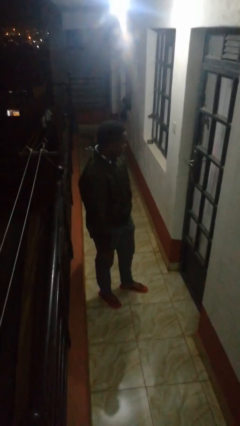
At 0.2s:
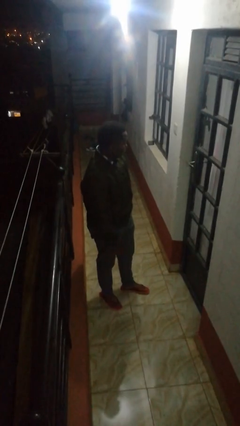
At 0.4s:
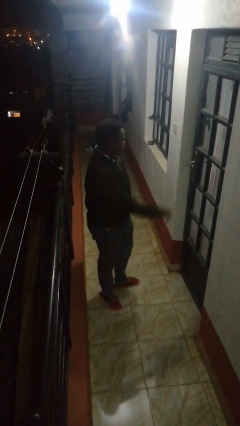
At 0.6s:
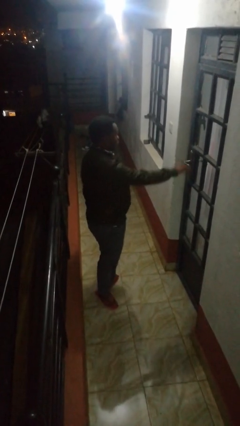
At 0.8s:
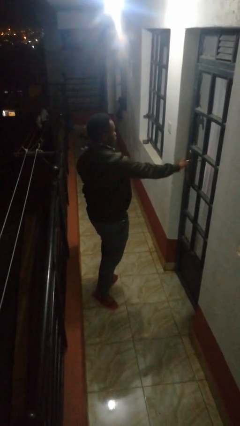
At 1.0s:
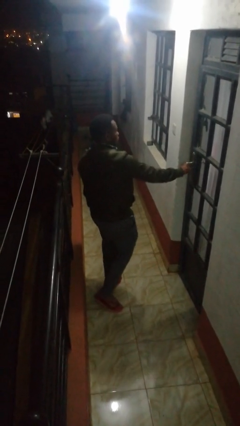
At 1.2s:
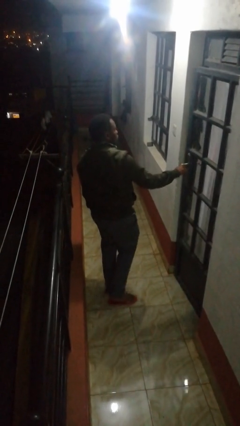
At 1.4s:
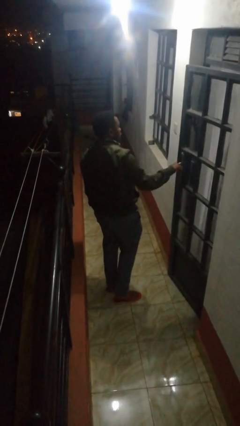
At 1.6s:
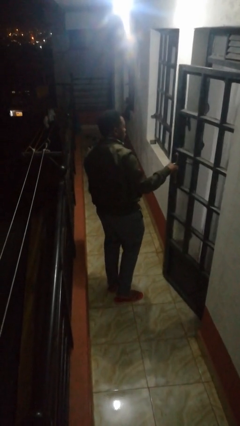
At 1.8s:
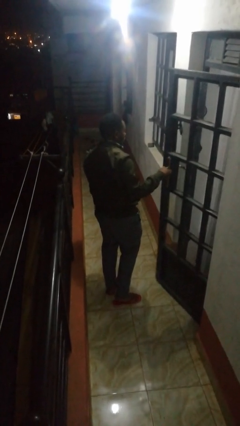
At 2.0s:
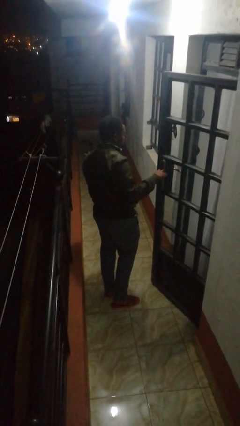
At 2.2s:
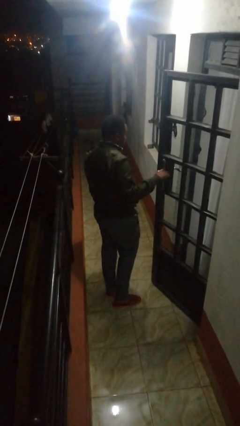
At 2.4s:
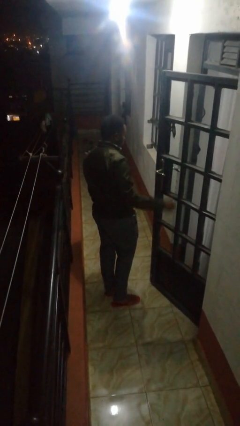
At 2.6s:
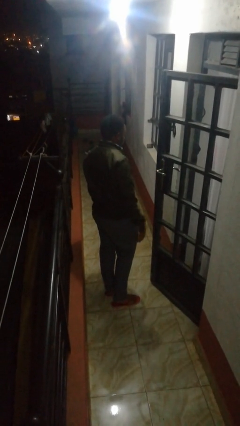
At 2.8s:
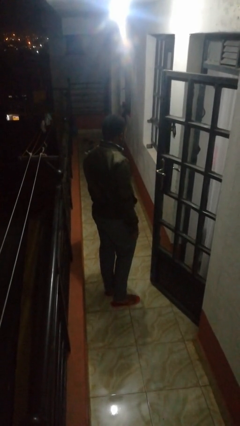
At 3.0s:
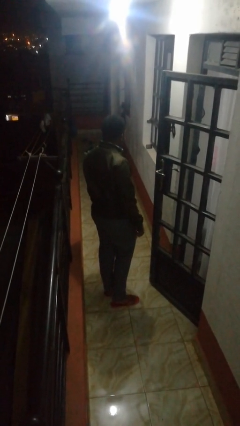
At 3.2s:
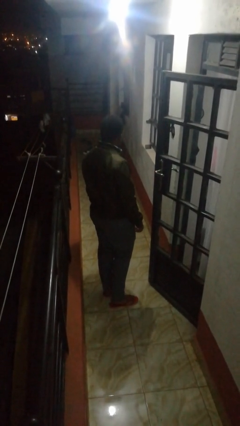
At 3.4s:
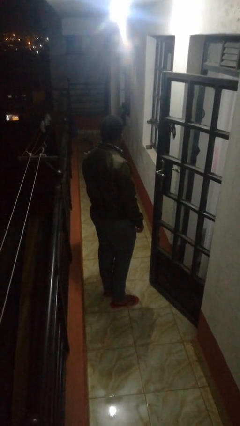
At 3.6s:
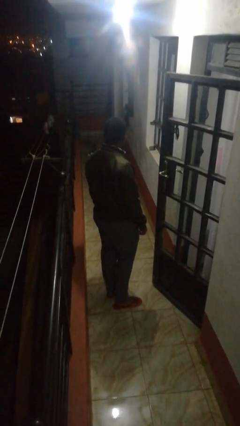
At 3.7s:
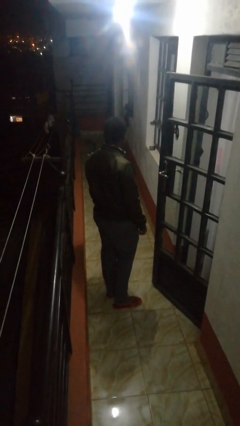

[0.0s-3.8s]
person opens facility door

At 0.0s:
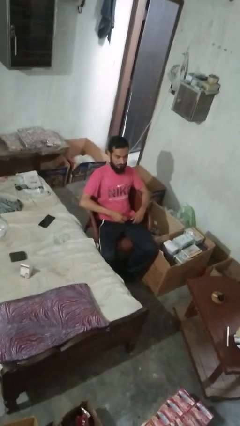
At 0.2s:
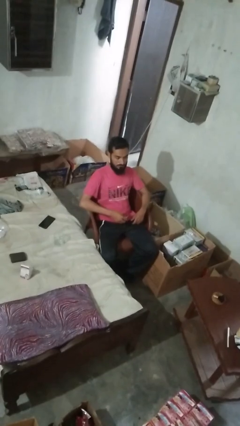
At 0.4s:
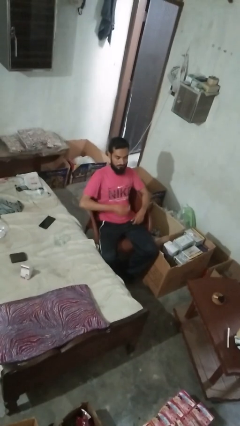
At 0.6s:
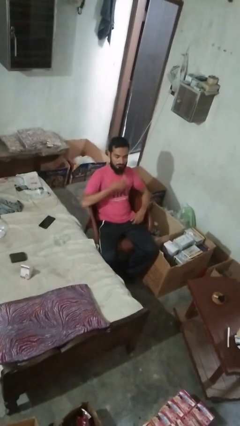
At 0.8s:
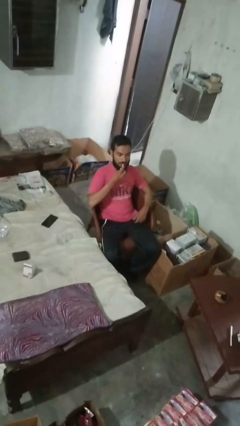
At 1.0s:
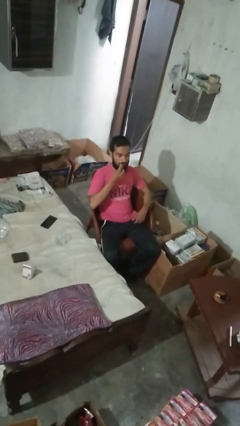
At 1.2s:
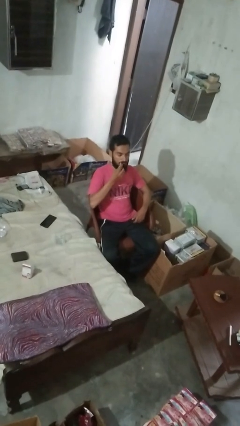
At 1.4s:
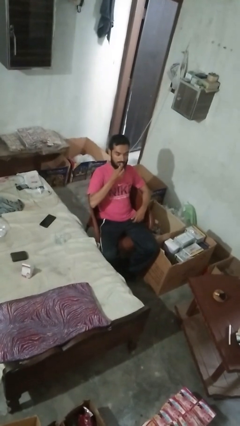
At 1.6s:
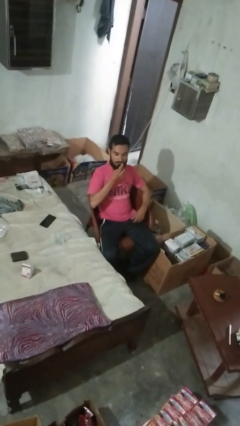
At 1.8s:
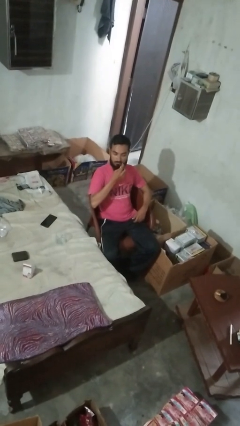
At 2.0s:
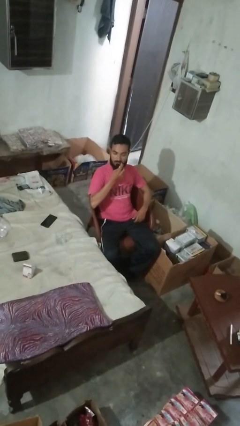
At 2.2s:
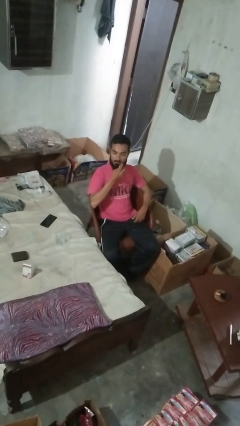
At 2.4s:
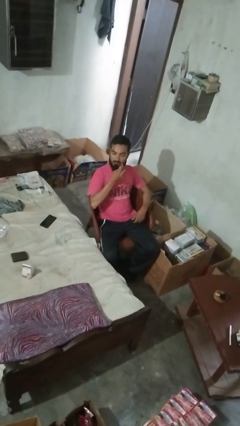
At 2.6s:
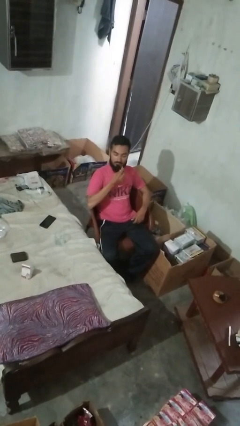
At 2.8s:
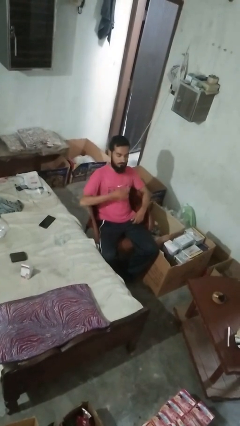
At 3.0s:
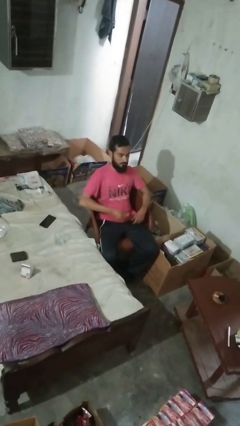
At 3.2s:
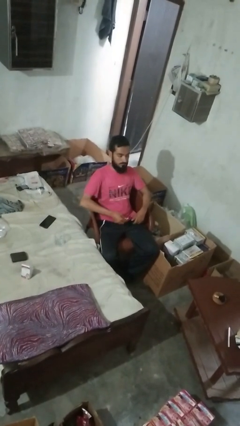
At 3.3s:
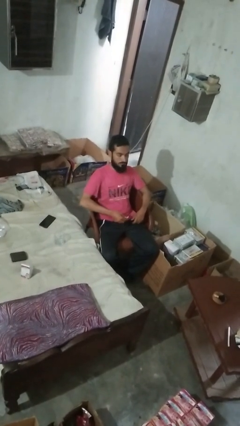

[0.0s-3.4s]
person applies lip makeup

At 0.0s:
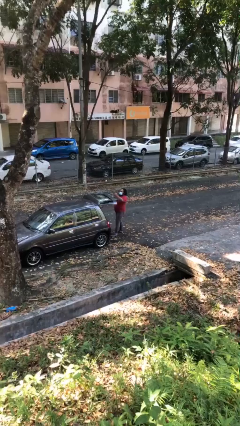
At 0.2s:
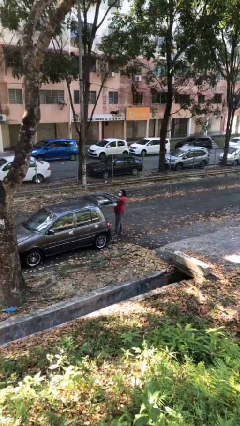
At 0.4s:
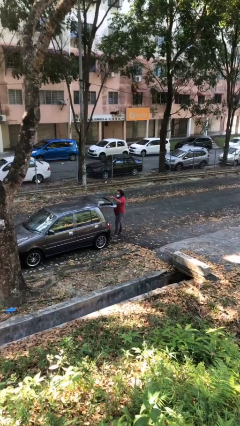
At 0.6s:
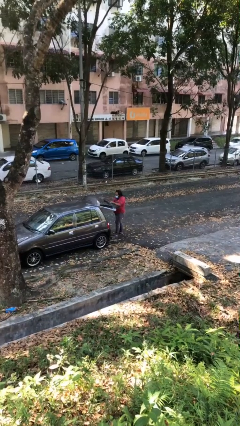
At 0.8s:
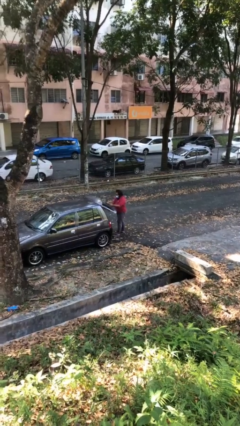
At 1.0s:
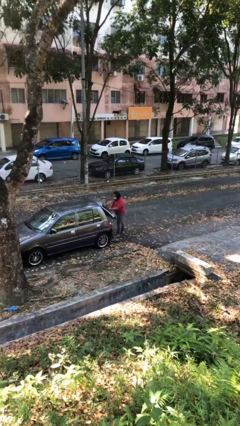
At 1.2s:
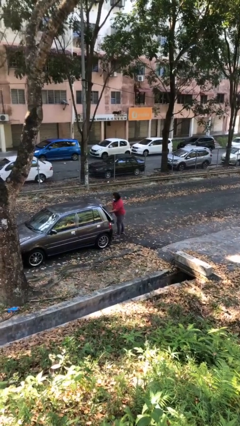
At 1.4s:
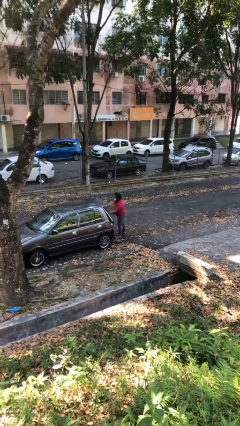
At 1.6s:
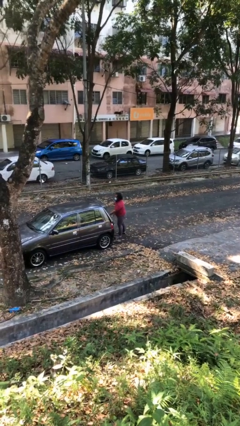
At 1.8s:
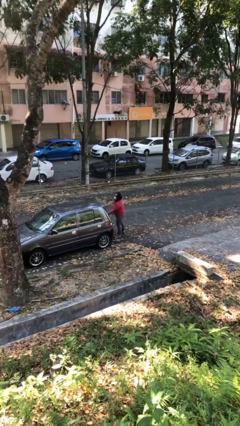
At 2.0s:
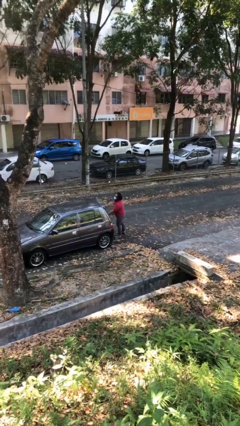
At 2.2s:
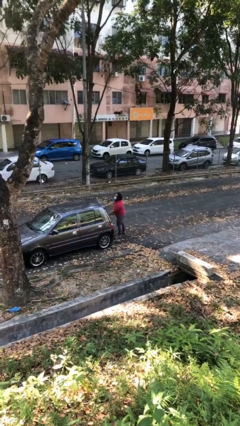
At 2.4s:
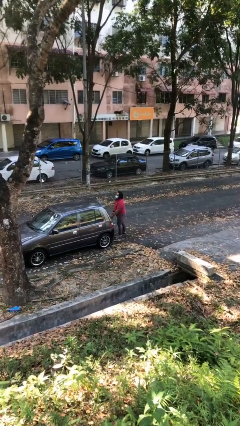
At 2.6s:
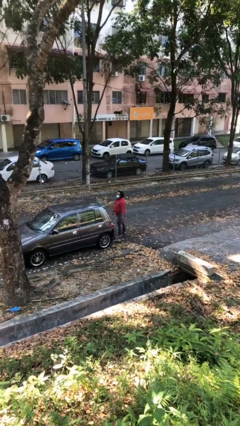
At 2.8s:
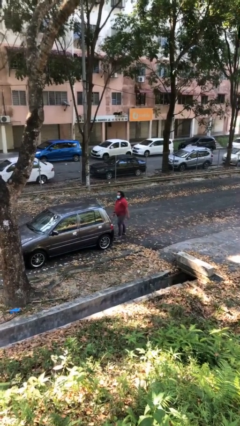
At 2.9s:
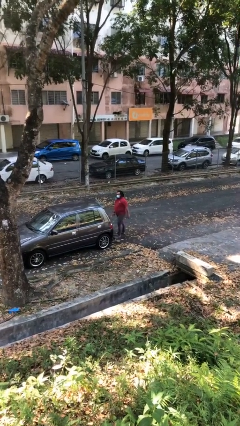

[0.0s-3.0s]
person closes car trunk

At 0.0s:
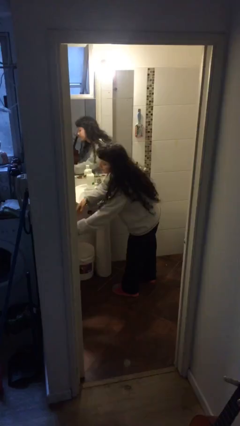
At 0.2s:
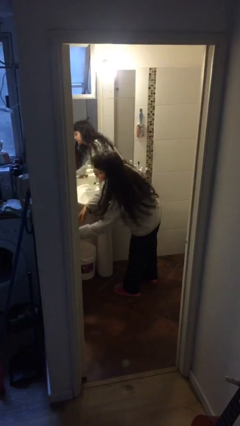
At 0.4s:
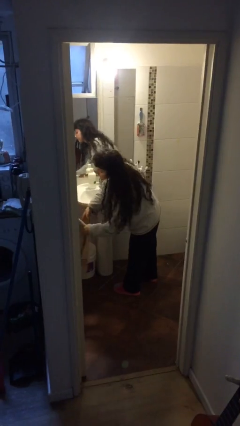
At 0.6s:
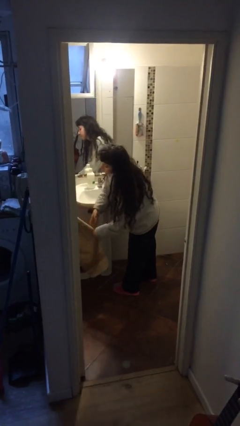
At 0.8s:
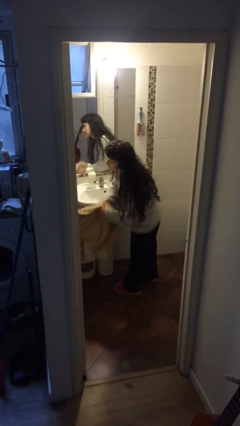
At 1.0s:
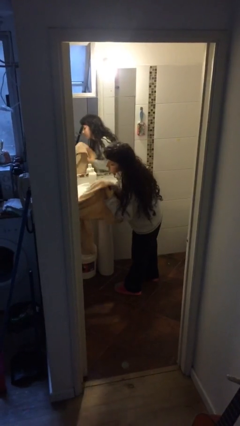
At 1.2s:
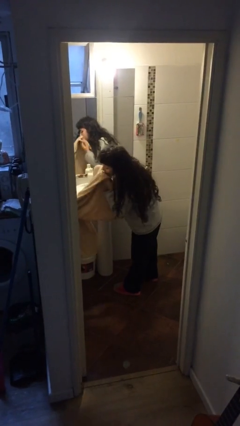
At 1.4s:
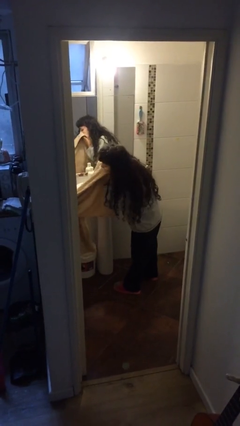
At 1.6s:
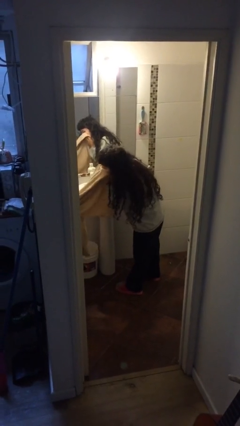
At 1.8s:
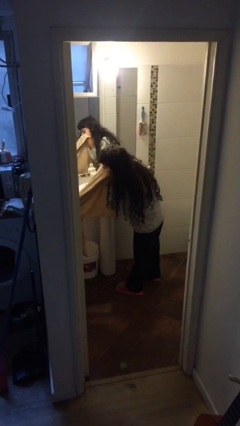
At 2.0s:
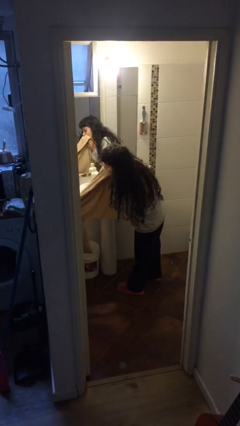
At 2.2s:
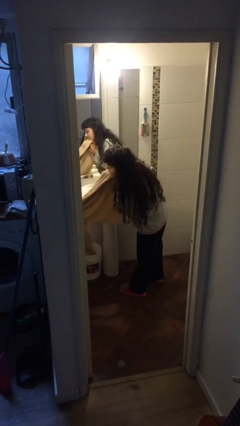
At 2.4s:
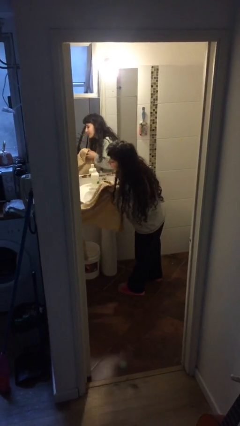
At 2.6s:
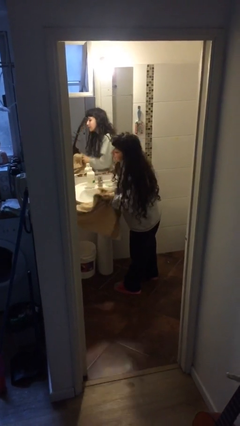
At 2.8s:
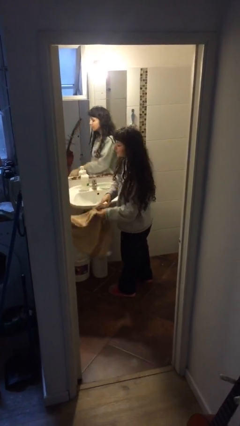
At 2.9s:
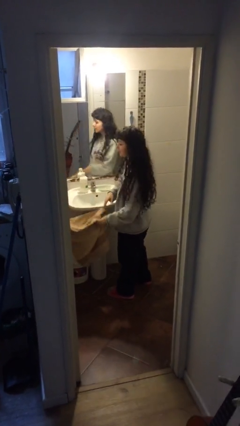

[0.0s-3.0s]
person dries face with towel

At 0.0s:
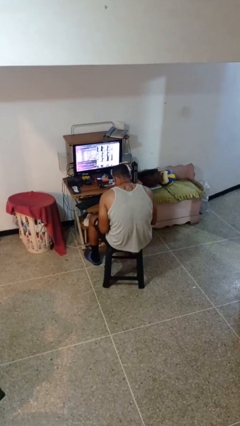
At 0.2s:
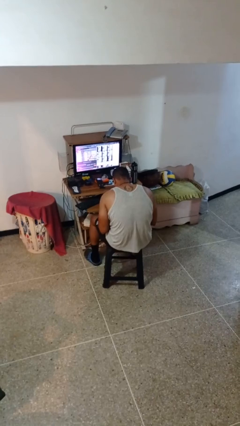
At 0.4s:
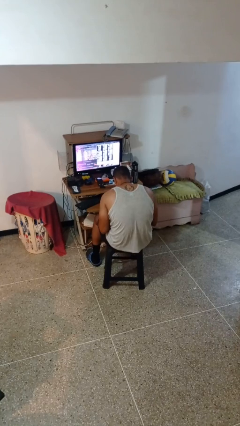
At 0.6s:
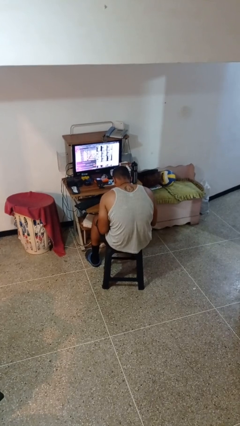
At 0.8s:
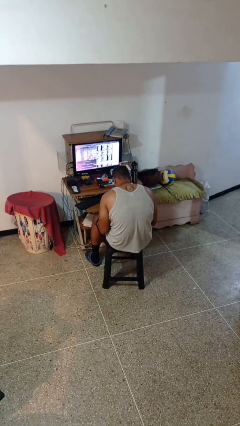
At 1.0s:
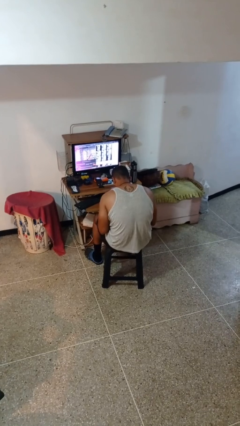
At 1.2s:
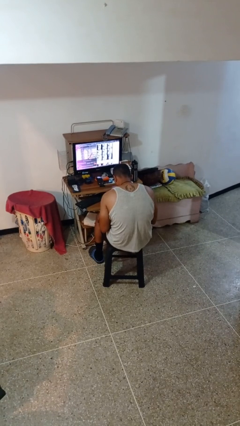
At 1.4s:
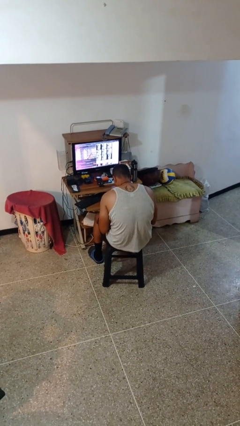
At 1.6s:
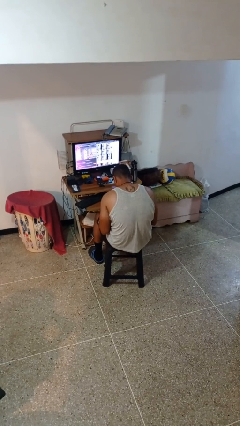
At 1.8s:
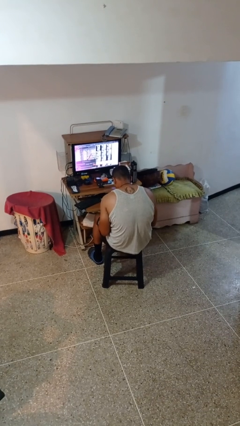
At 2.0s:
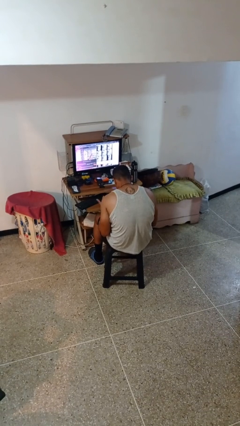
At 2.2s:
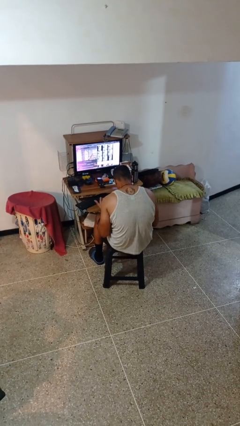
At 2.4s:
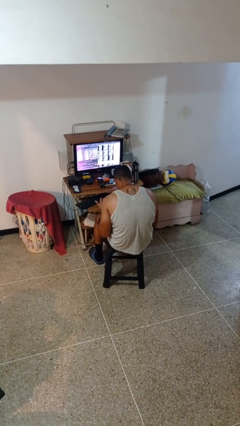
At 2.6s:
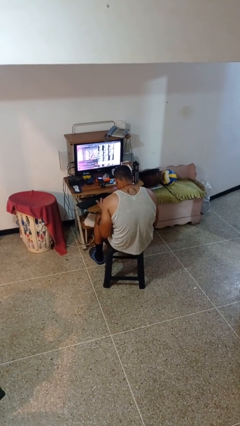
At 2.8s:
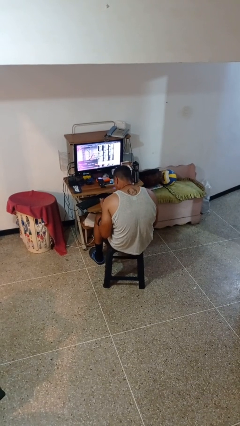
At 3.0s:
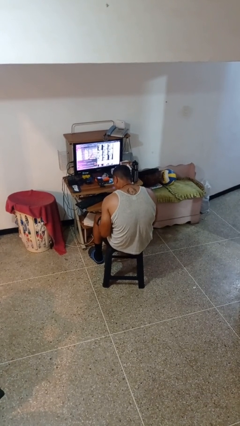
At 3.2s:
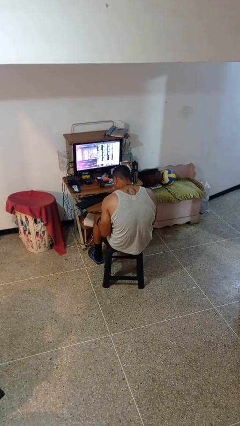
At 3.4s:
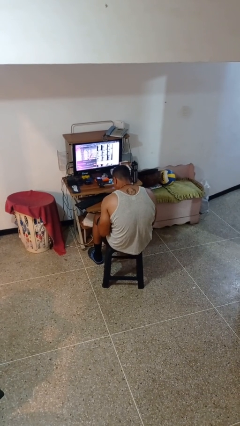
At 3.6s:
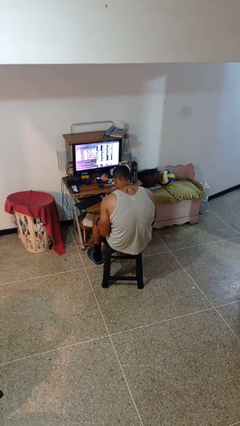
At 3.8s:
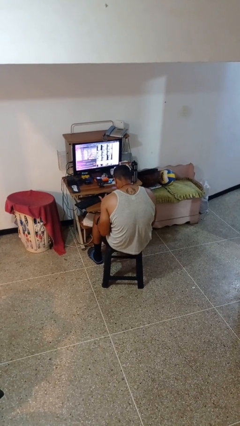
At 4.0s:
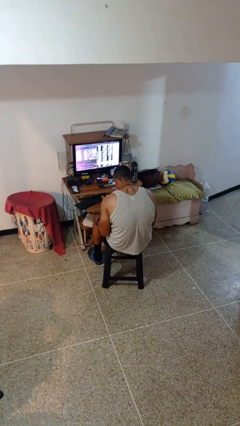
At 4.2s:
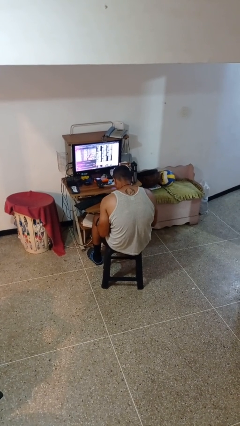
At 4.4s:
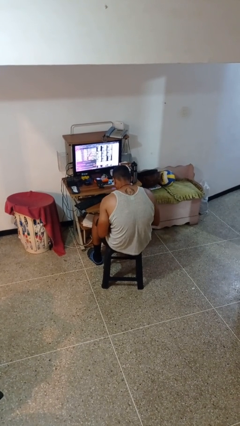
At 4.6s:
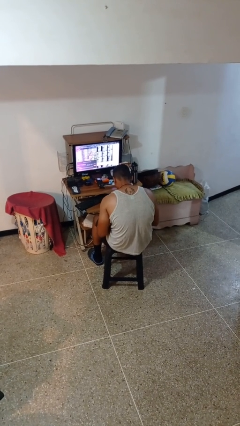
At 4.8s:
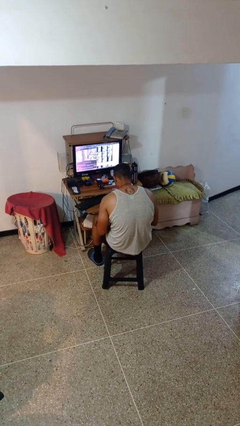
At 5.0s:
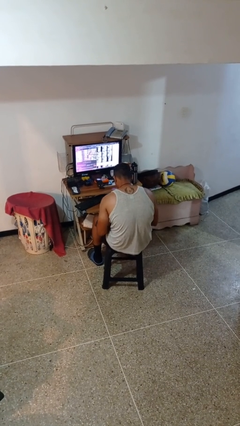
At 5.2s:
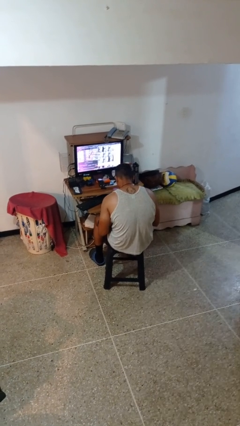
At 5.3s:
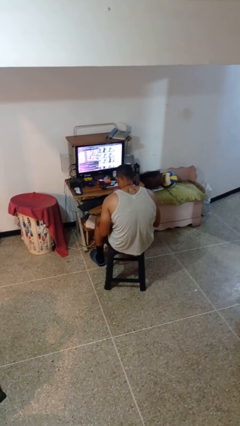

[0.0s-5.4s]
person looks at hands in lap
